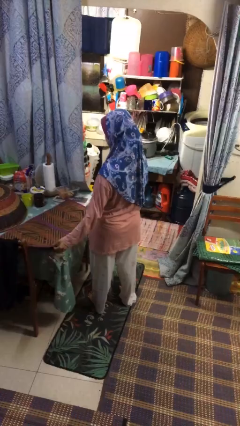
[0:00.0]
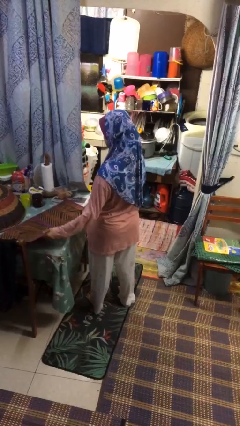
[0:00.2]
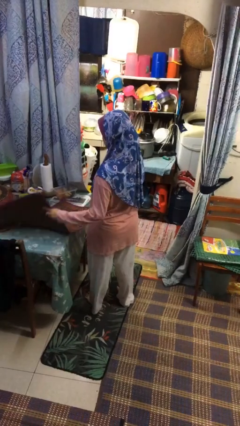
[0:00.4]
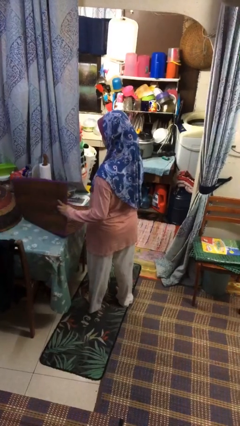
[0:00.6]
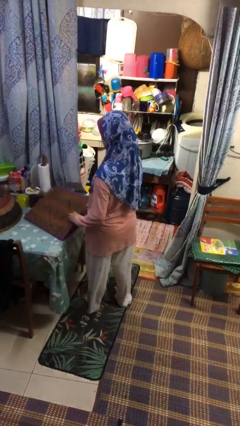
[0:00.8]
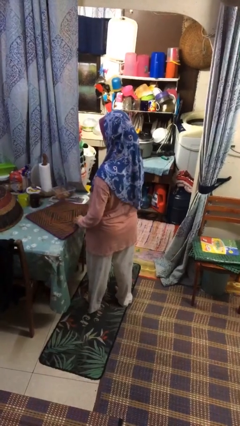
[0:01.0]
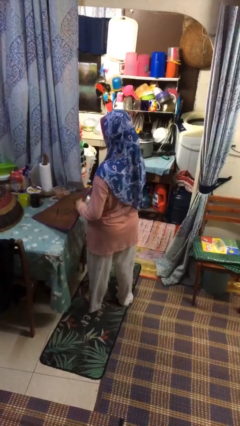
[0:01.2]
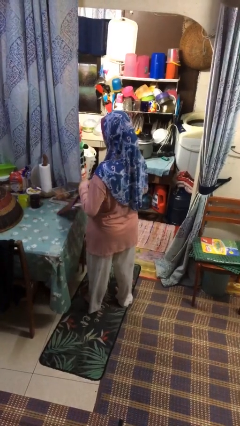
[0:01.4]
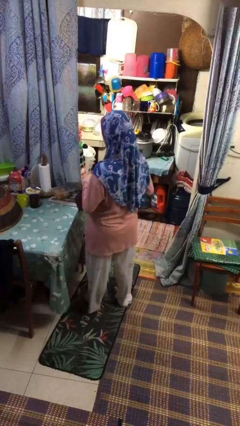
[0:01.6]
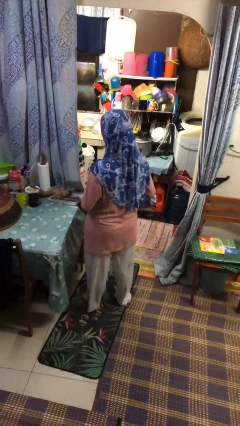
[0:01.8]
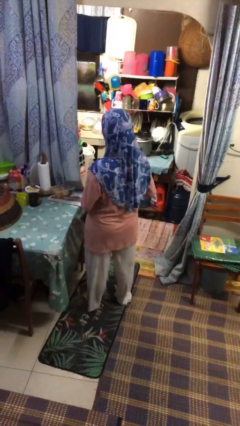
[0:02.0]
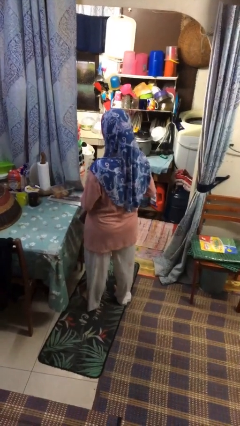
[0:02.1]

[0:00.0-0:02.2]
person folds tablecloth

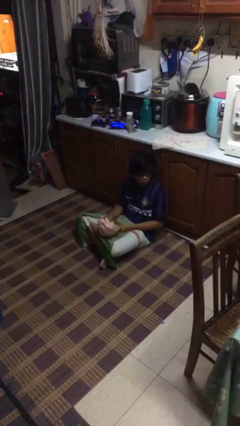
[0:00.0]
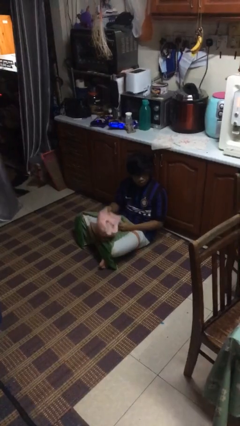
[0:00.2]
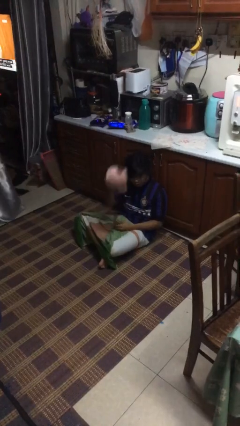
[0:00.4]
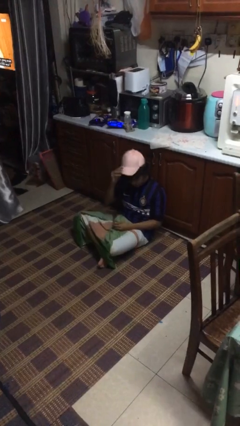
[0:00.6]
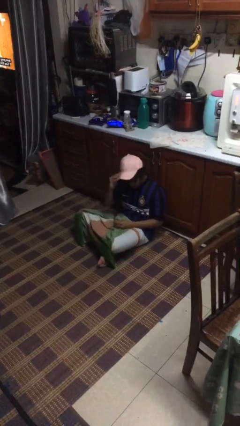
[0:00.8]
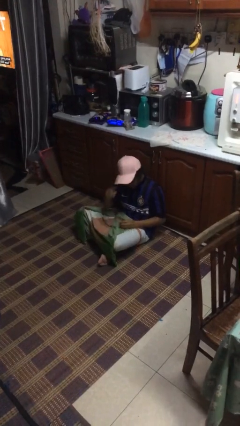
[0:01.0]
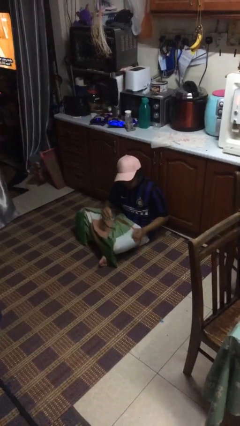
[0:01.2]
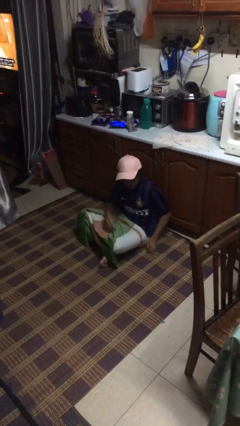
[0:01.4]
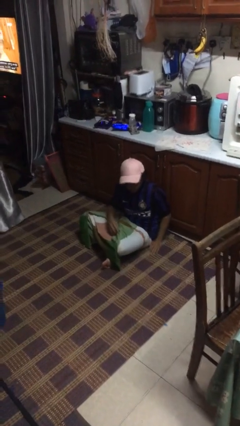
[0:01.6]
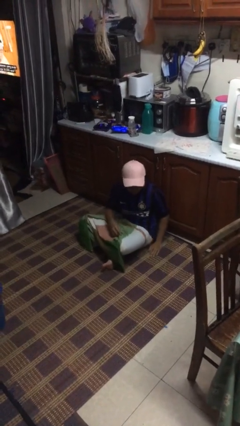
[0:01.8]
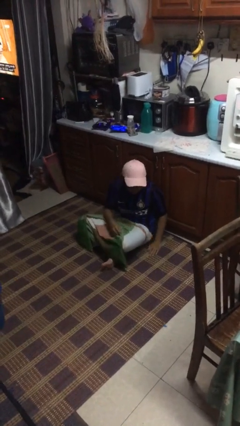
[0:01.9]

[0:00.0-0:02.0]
person puts on hat

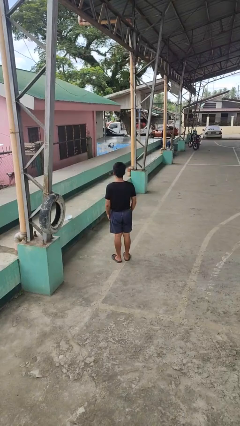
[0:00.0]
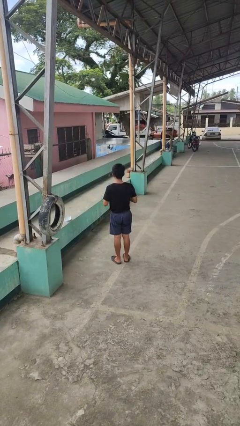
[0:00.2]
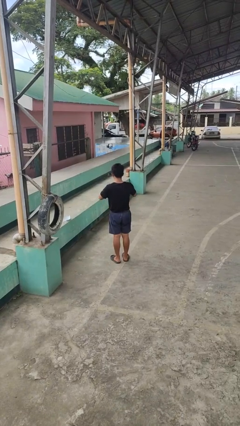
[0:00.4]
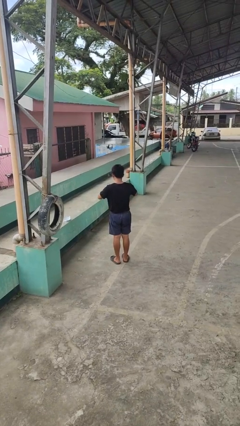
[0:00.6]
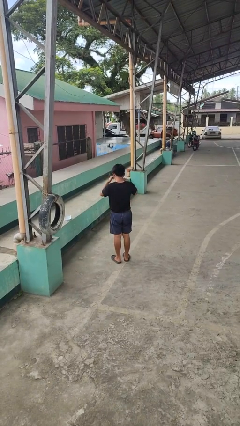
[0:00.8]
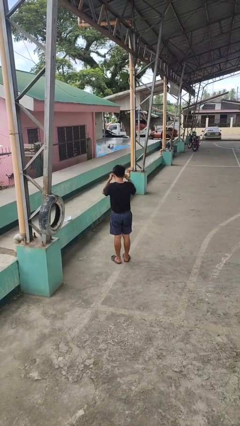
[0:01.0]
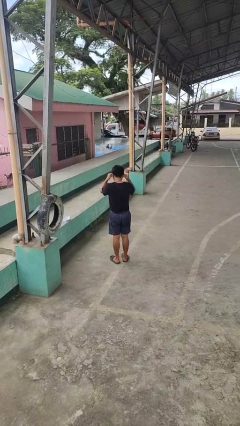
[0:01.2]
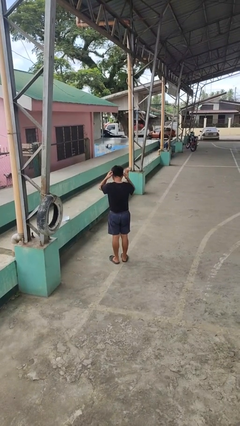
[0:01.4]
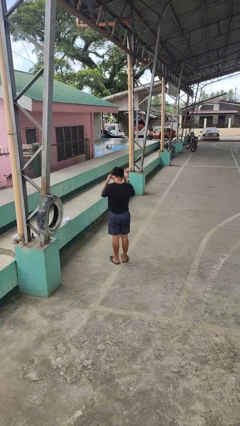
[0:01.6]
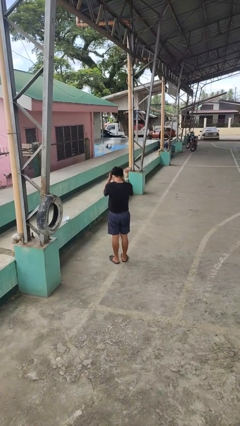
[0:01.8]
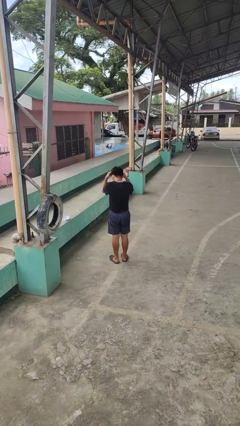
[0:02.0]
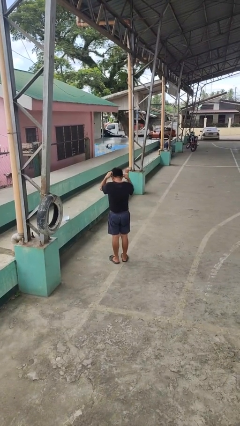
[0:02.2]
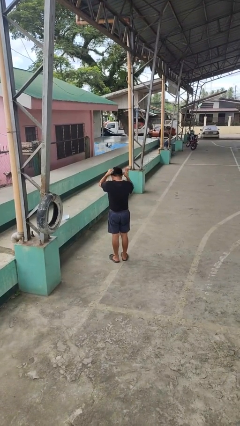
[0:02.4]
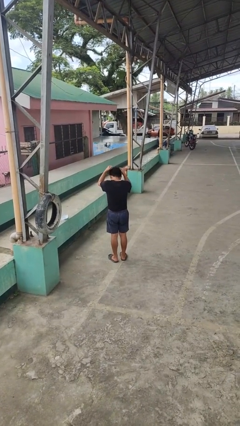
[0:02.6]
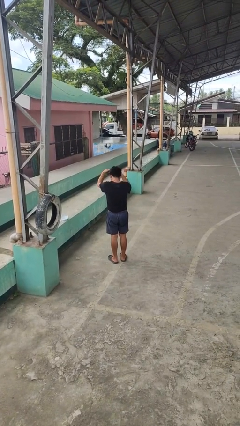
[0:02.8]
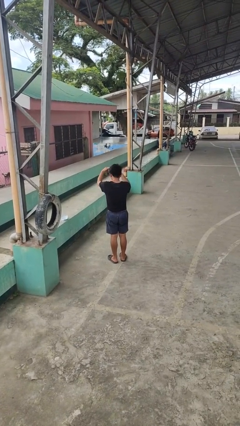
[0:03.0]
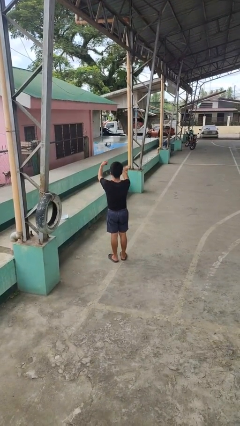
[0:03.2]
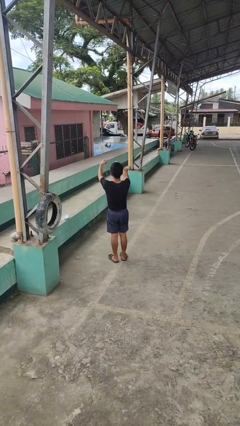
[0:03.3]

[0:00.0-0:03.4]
person takes off necklace

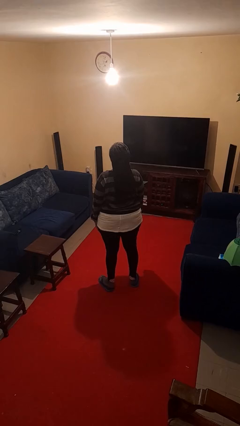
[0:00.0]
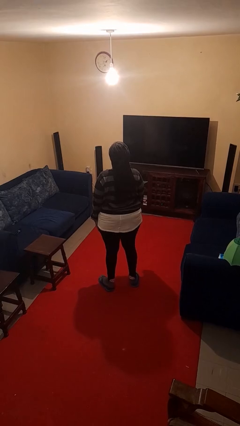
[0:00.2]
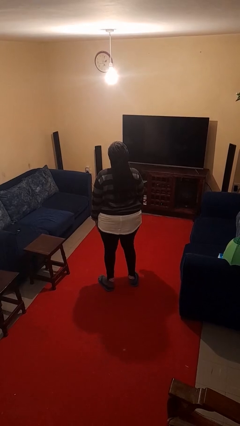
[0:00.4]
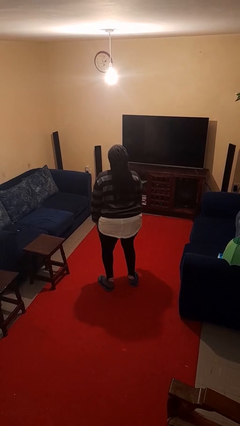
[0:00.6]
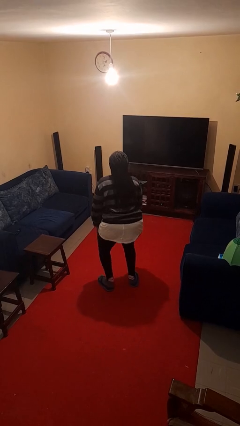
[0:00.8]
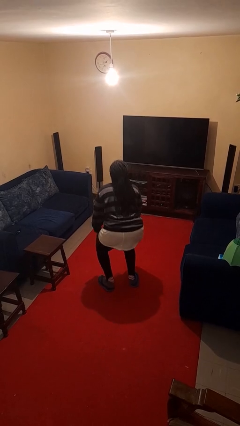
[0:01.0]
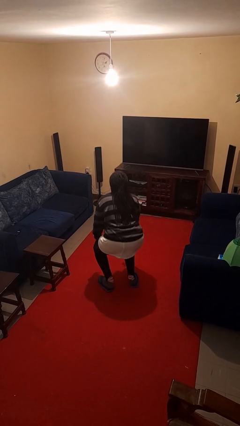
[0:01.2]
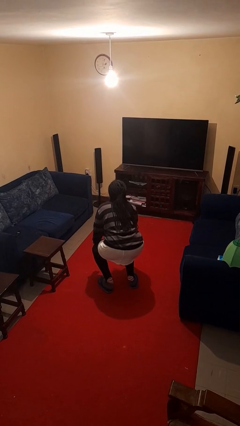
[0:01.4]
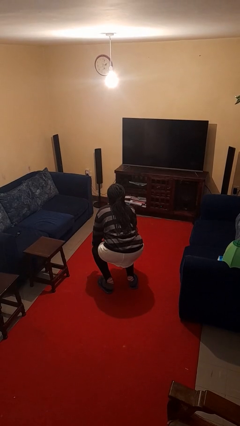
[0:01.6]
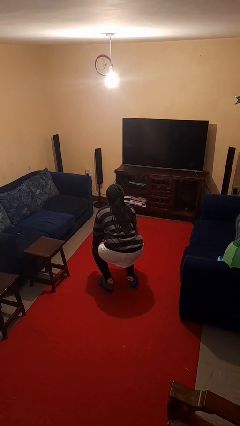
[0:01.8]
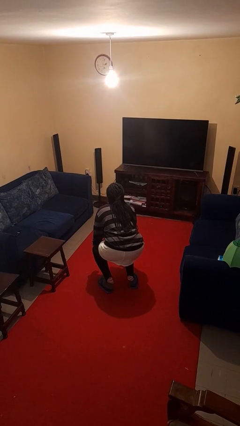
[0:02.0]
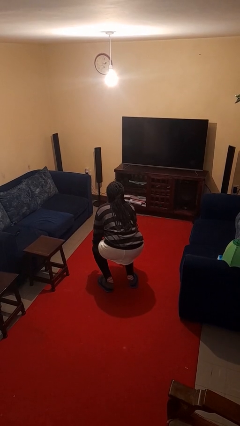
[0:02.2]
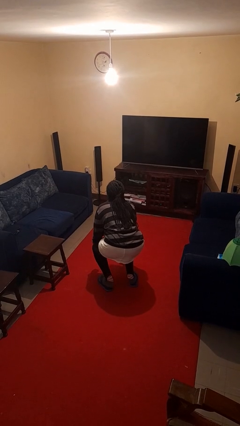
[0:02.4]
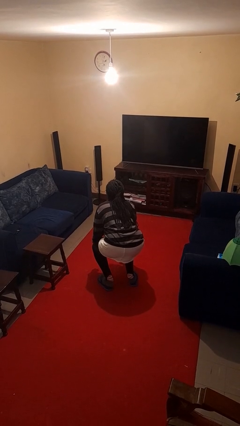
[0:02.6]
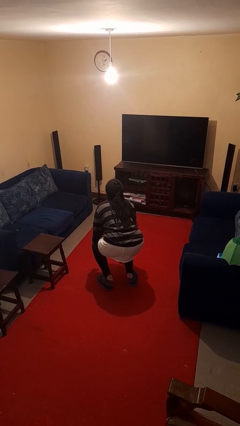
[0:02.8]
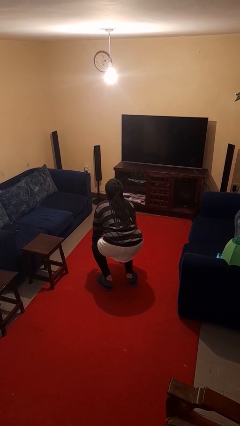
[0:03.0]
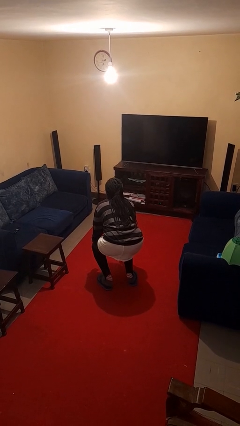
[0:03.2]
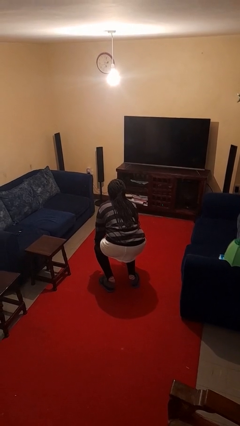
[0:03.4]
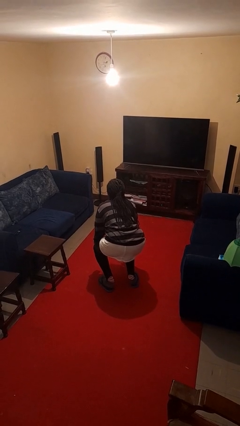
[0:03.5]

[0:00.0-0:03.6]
person squats

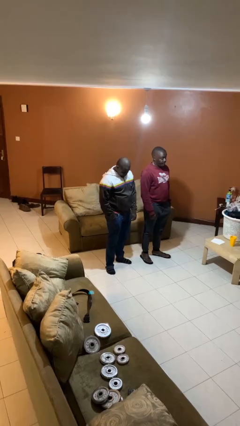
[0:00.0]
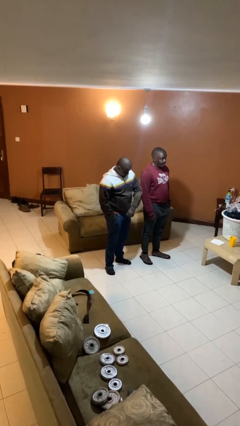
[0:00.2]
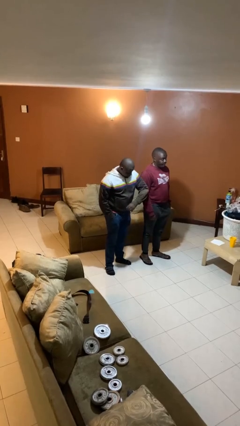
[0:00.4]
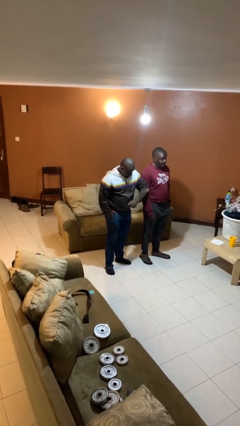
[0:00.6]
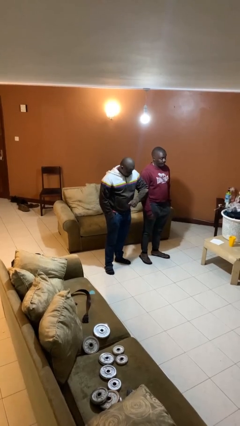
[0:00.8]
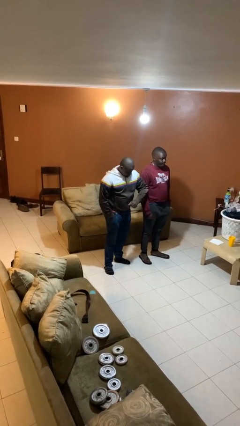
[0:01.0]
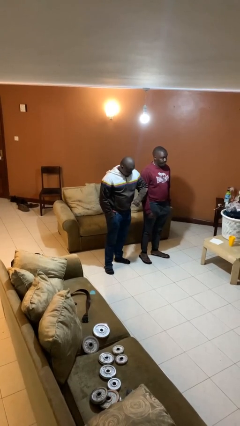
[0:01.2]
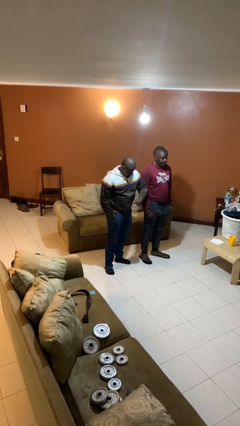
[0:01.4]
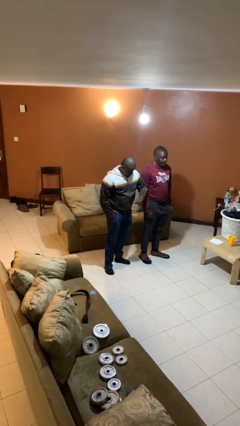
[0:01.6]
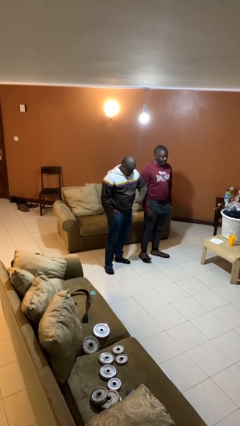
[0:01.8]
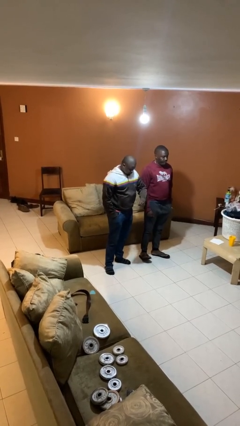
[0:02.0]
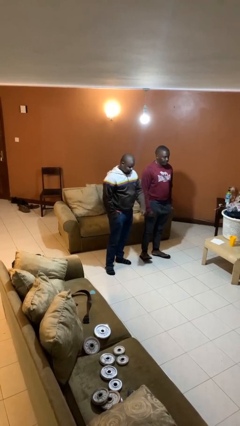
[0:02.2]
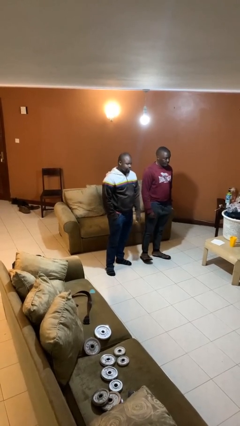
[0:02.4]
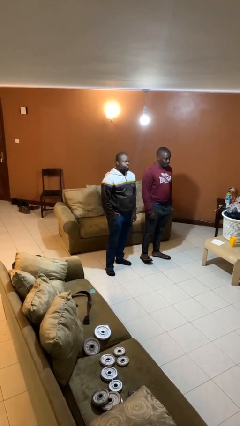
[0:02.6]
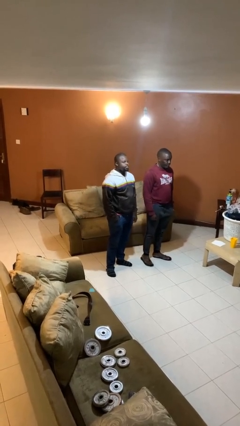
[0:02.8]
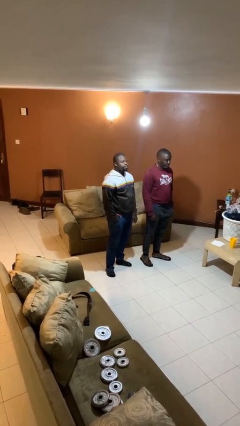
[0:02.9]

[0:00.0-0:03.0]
person nudges person with elbow

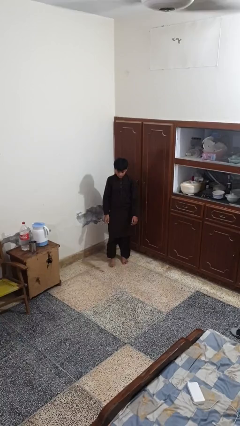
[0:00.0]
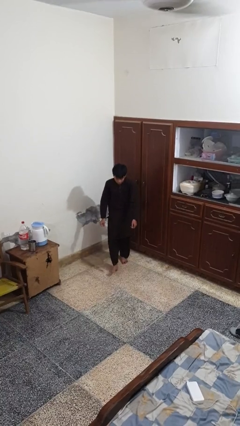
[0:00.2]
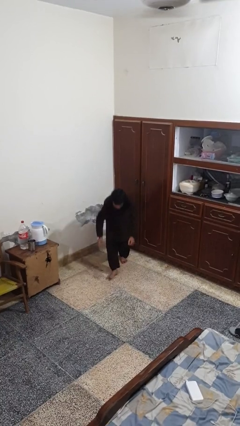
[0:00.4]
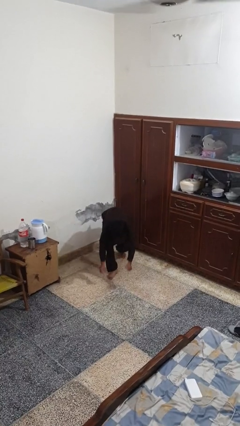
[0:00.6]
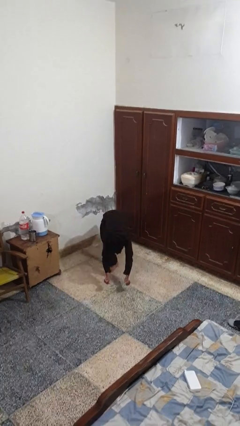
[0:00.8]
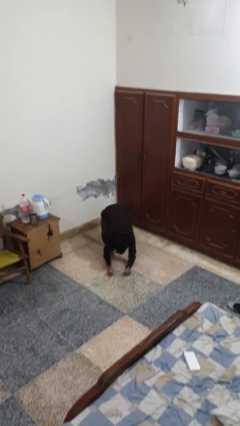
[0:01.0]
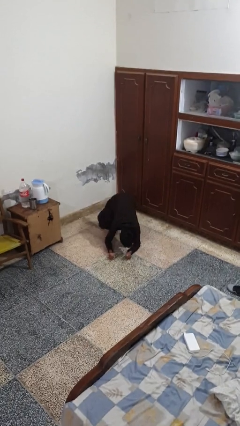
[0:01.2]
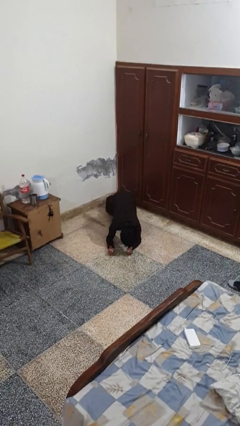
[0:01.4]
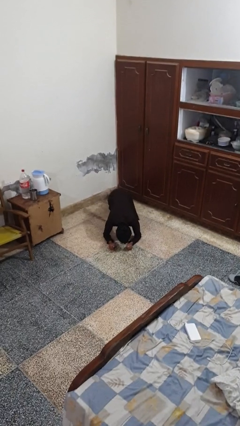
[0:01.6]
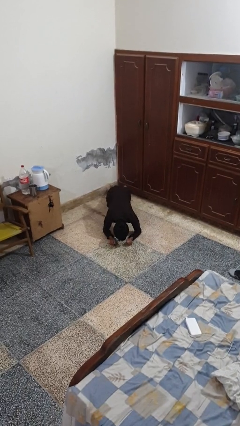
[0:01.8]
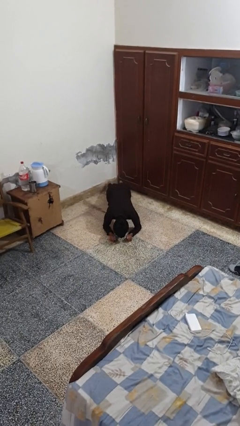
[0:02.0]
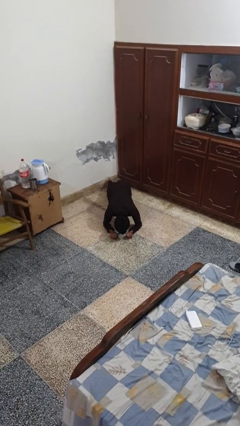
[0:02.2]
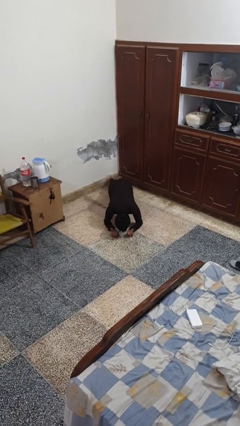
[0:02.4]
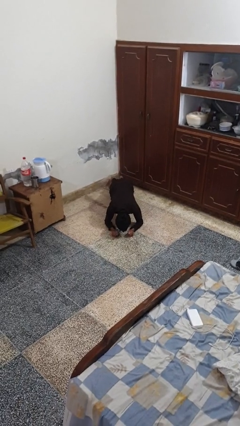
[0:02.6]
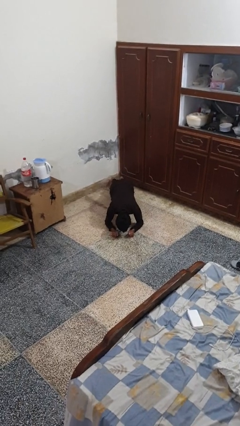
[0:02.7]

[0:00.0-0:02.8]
person exercises with plank

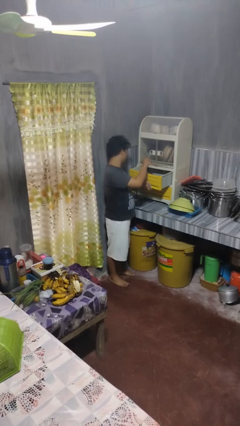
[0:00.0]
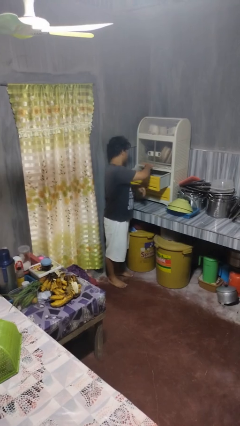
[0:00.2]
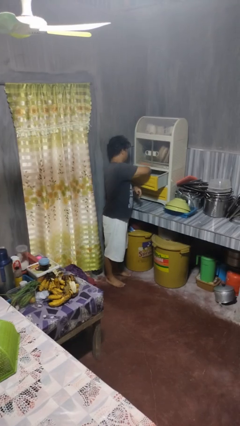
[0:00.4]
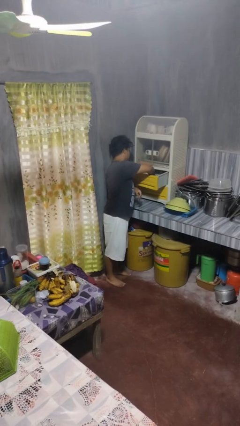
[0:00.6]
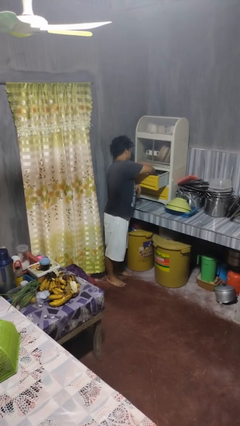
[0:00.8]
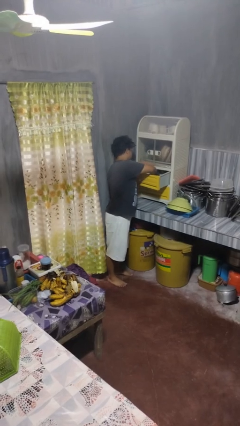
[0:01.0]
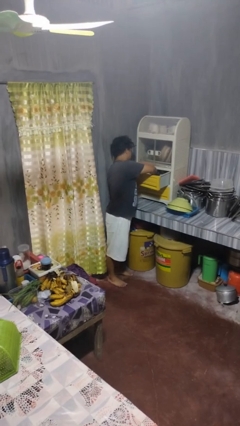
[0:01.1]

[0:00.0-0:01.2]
person puts object into kitchen drawer
